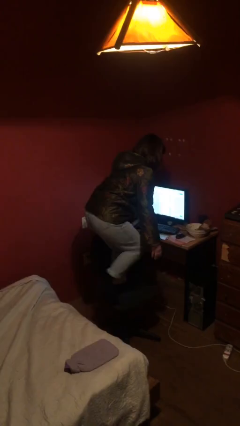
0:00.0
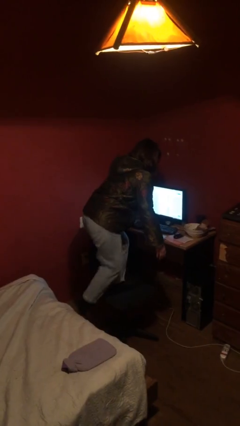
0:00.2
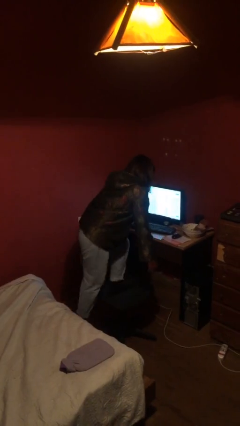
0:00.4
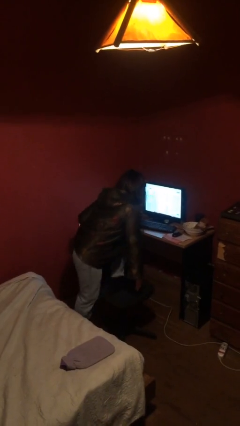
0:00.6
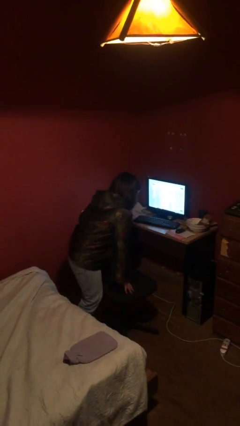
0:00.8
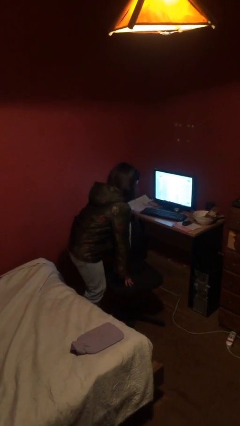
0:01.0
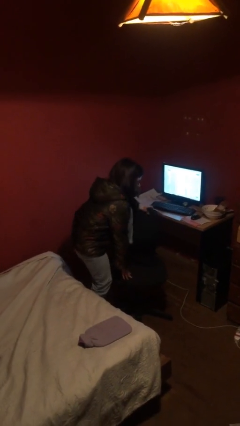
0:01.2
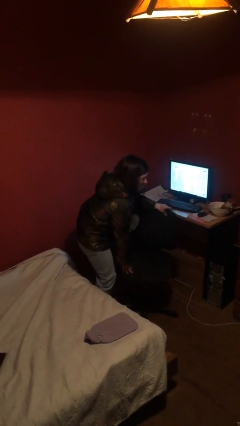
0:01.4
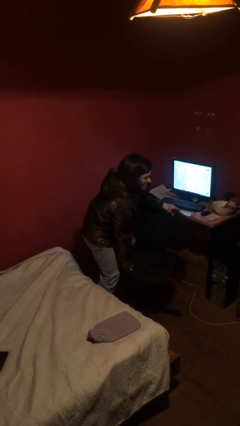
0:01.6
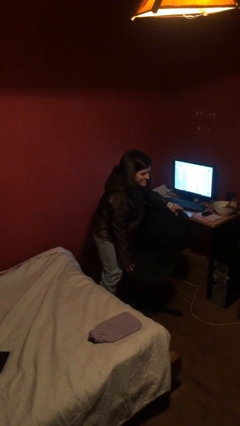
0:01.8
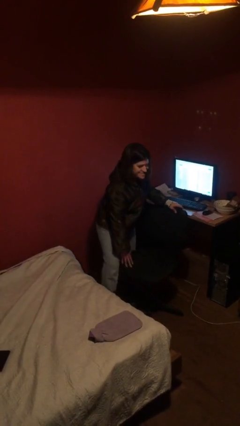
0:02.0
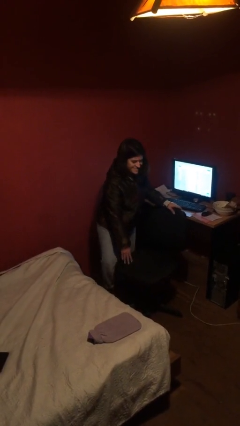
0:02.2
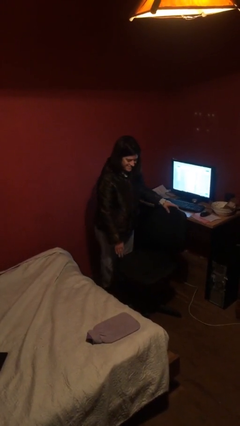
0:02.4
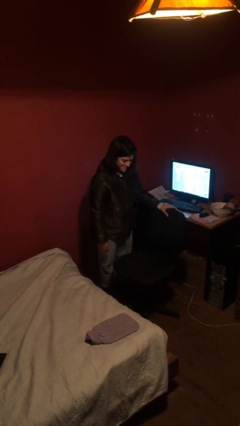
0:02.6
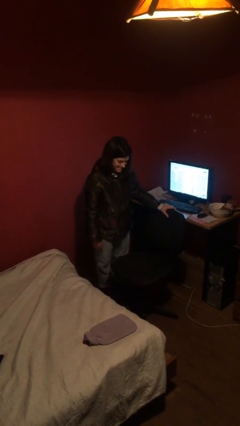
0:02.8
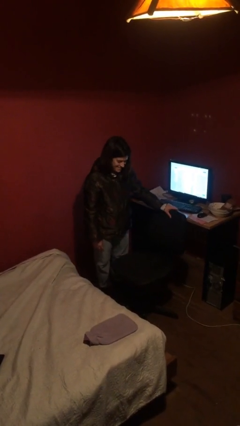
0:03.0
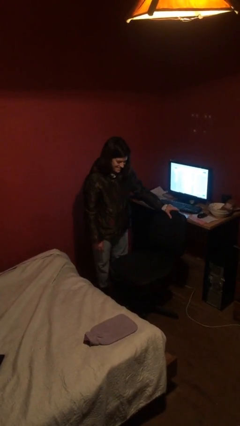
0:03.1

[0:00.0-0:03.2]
person climbs off chair

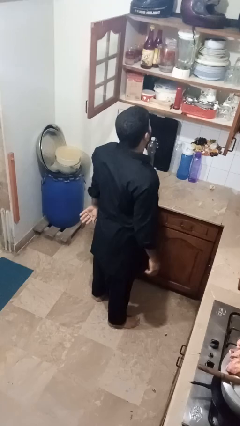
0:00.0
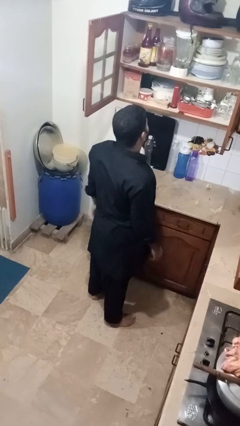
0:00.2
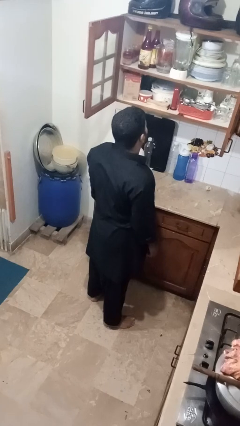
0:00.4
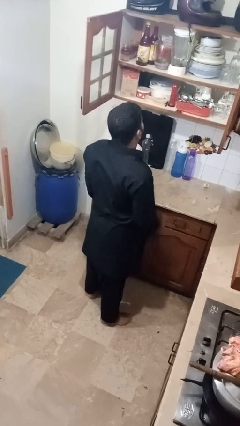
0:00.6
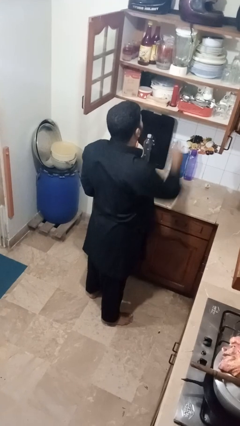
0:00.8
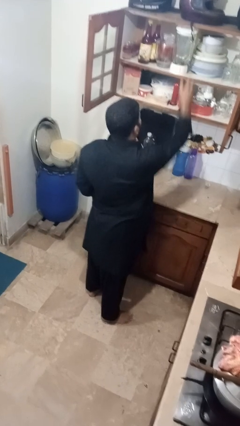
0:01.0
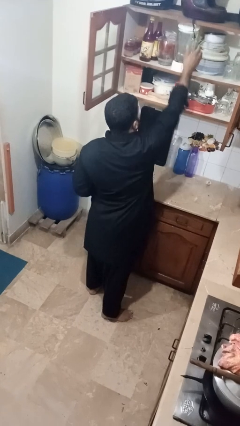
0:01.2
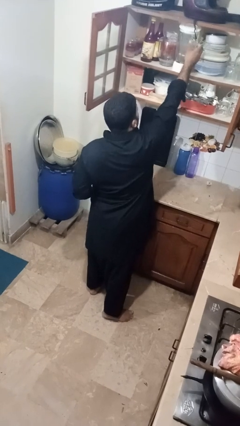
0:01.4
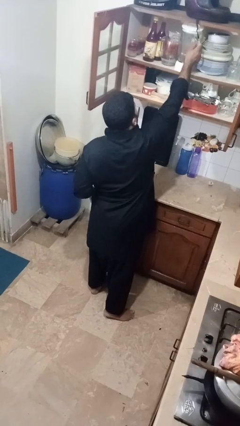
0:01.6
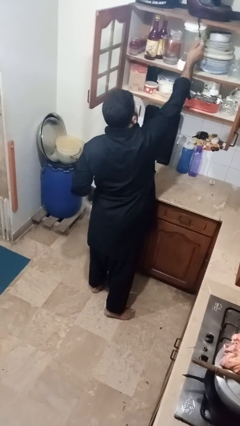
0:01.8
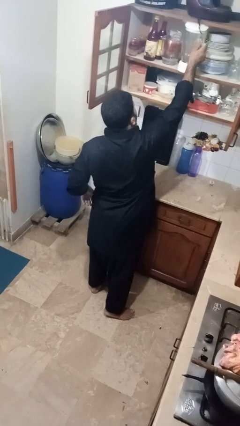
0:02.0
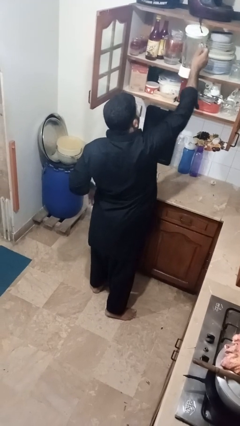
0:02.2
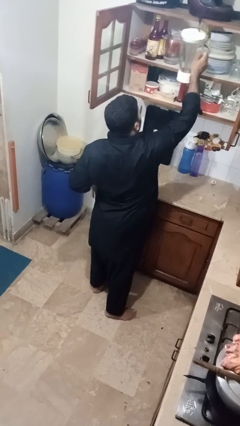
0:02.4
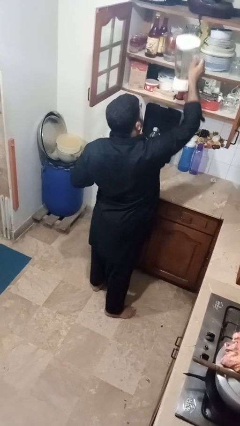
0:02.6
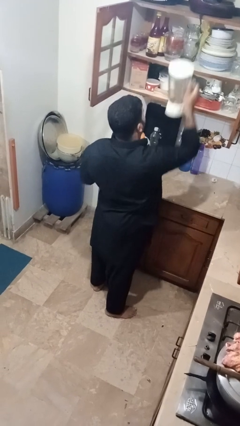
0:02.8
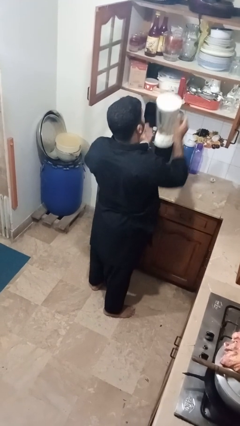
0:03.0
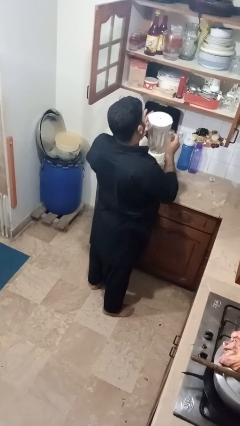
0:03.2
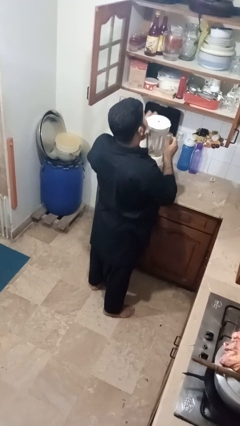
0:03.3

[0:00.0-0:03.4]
person picks up object from cabinet

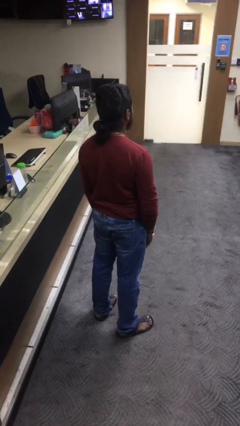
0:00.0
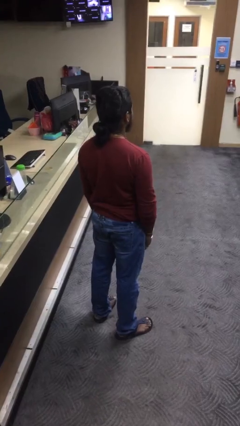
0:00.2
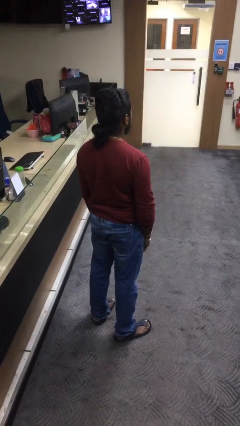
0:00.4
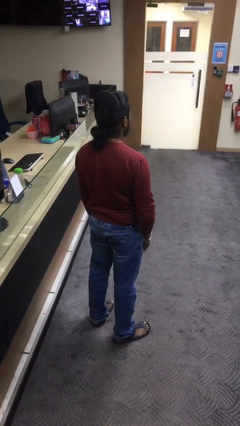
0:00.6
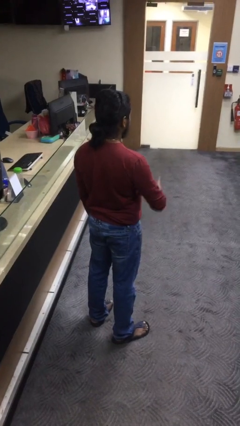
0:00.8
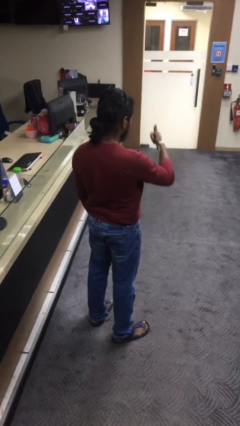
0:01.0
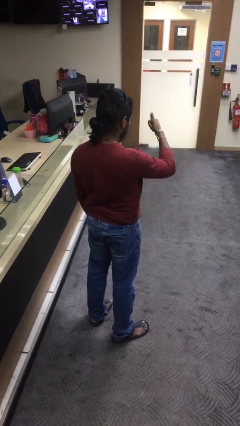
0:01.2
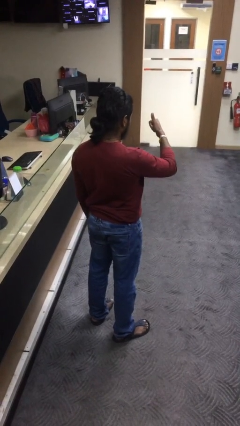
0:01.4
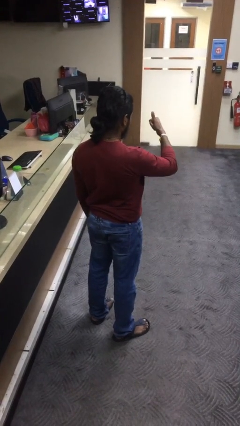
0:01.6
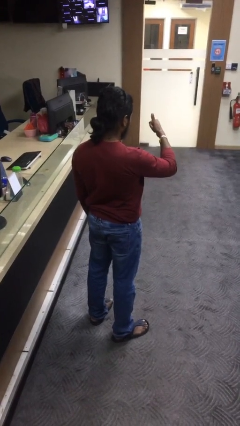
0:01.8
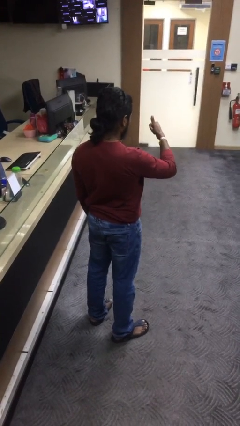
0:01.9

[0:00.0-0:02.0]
person gestures thumbs up

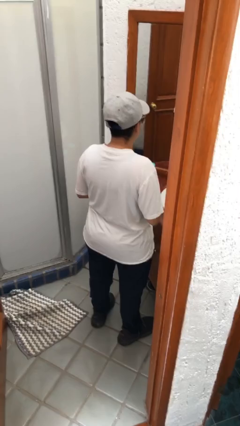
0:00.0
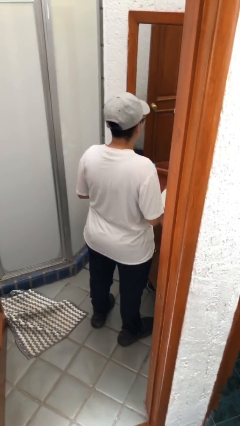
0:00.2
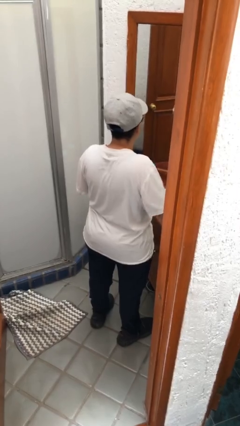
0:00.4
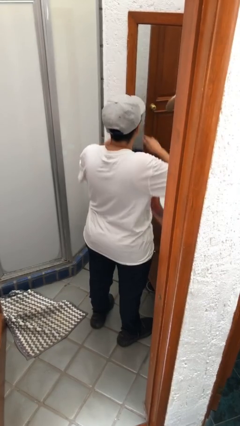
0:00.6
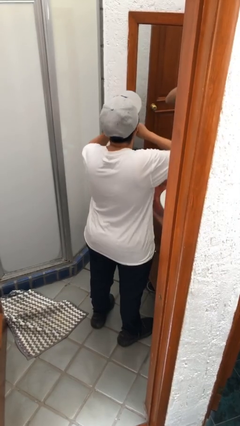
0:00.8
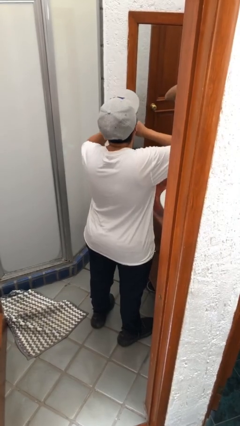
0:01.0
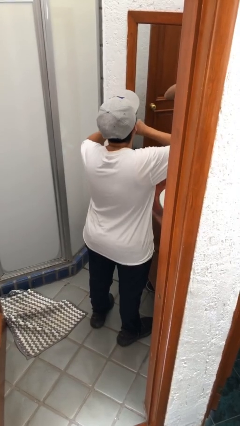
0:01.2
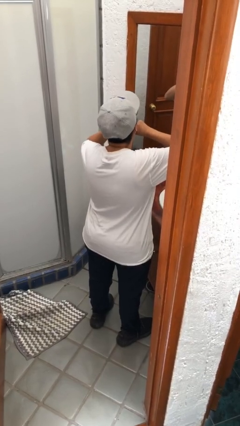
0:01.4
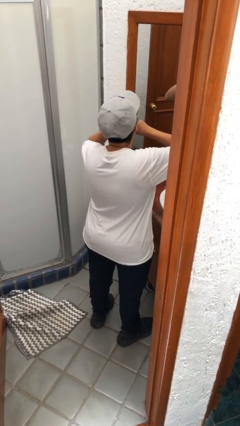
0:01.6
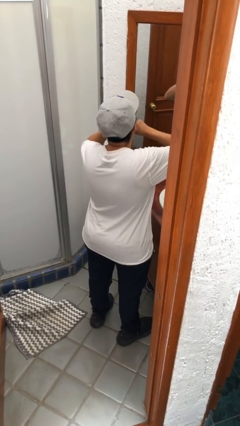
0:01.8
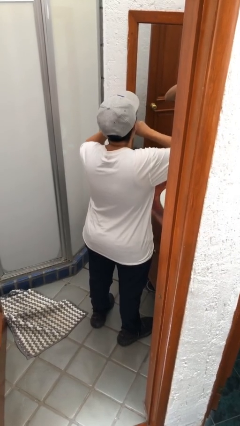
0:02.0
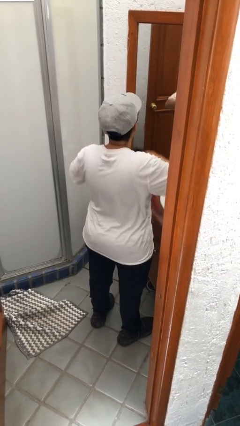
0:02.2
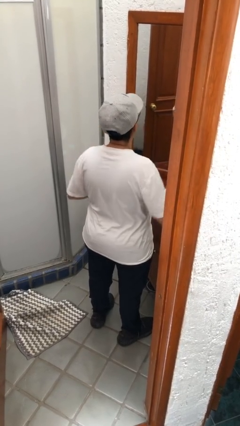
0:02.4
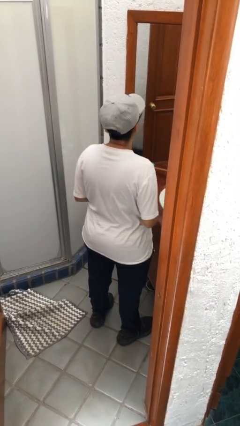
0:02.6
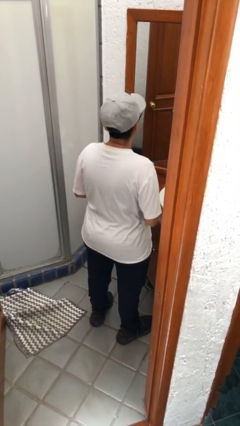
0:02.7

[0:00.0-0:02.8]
person flosses

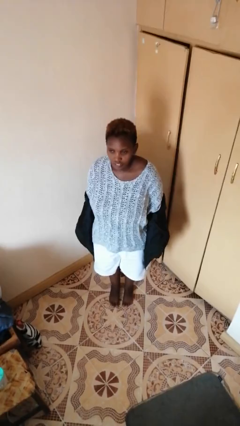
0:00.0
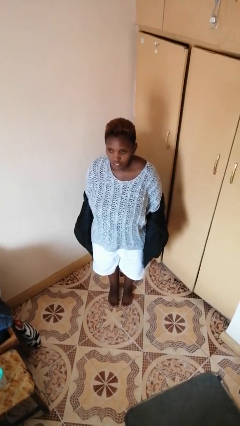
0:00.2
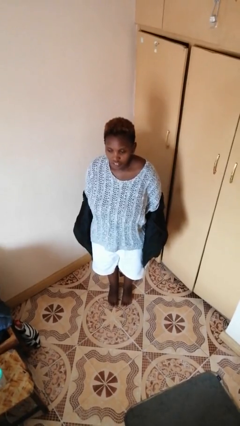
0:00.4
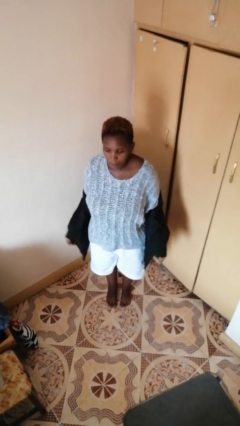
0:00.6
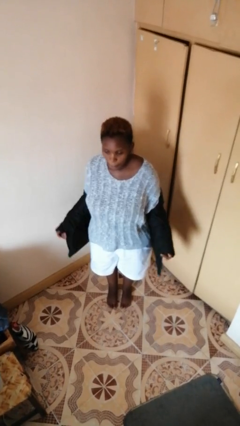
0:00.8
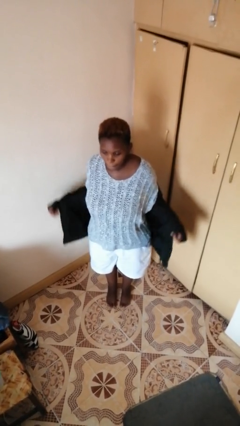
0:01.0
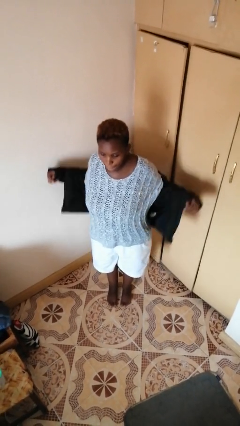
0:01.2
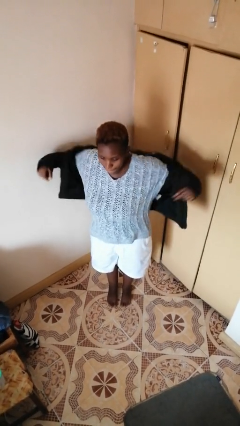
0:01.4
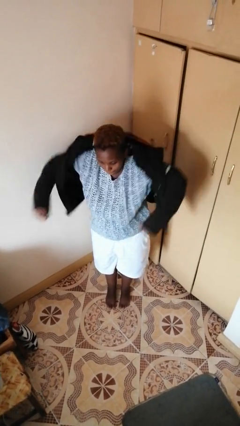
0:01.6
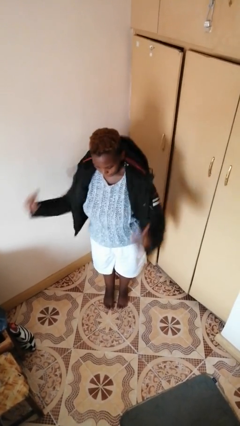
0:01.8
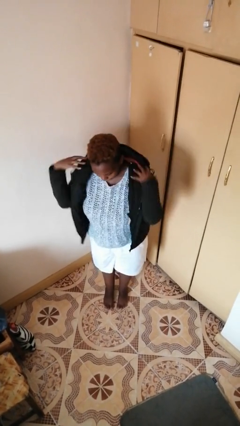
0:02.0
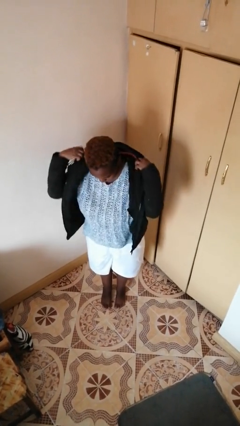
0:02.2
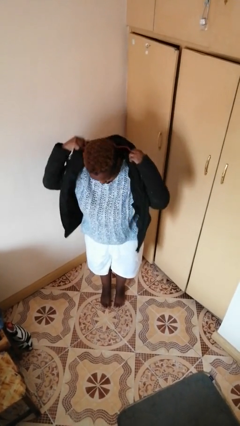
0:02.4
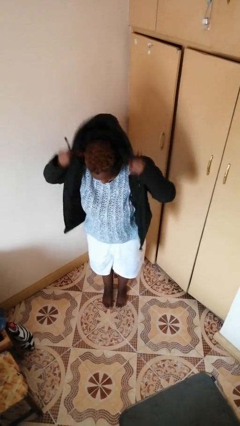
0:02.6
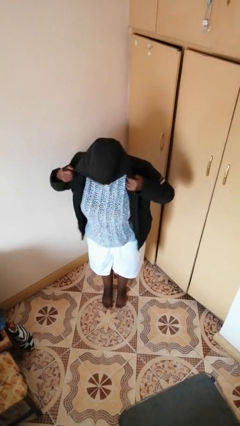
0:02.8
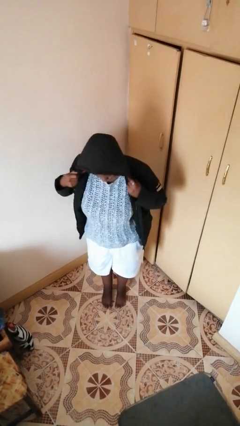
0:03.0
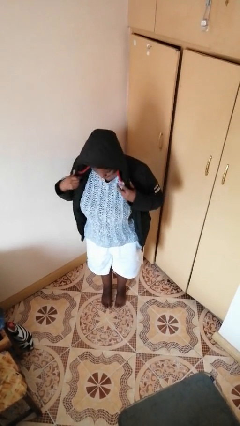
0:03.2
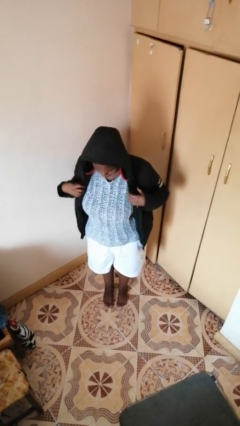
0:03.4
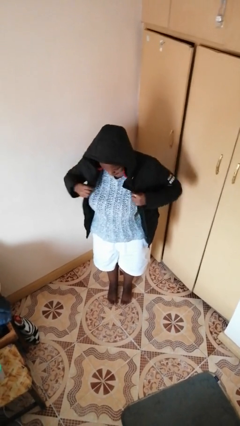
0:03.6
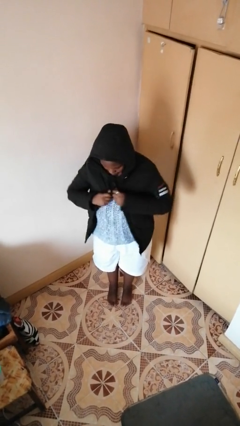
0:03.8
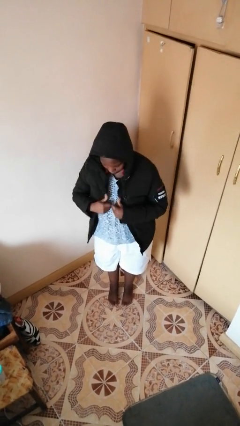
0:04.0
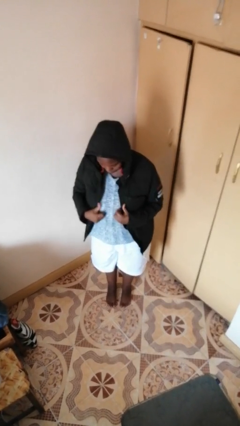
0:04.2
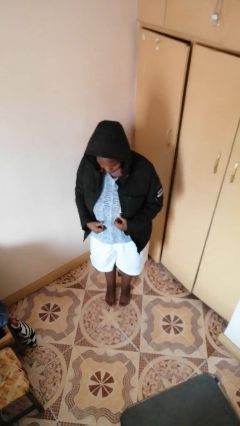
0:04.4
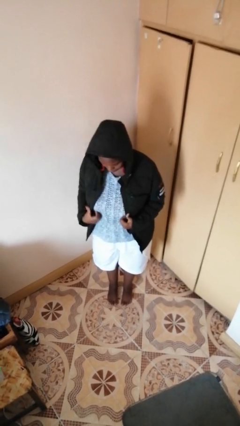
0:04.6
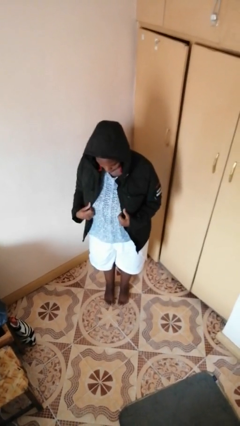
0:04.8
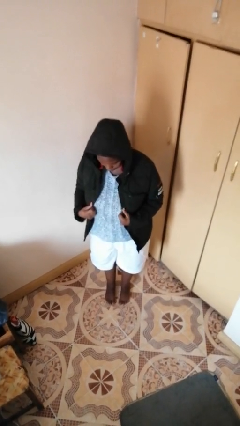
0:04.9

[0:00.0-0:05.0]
person puts on hoodie

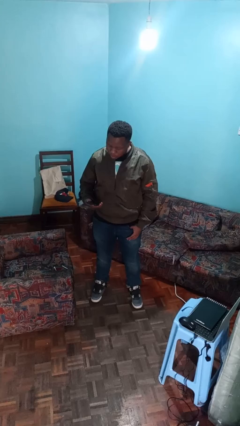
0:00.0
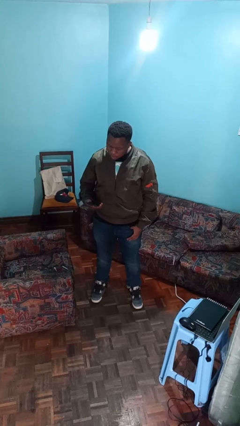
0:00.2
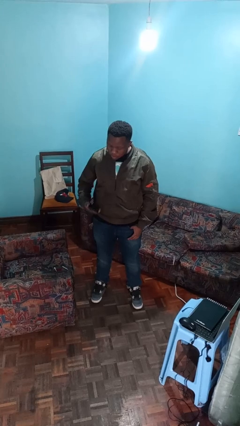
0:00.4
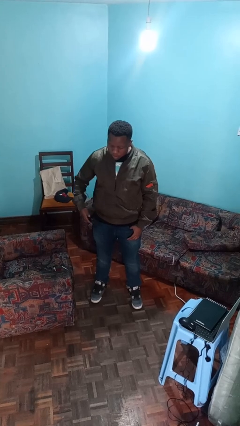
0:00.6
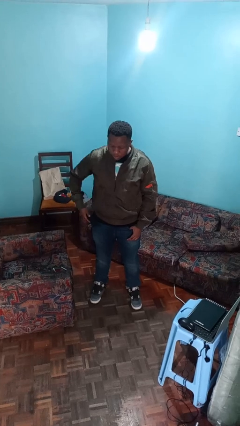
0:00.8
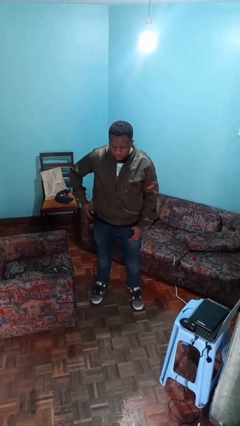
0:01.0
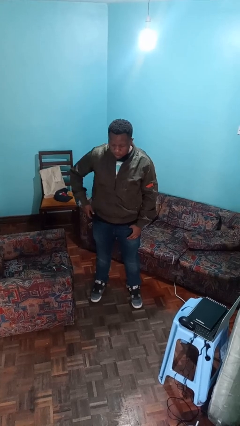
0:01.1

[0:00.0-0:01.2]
person puts phone into pocket

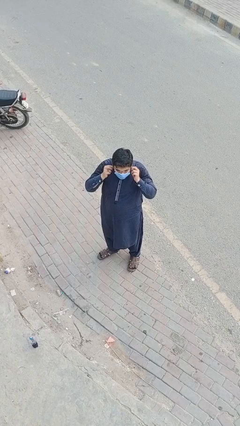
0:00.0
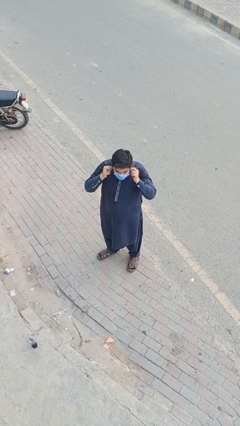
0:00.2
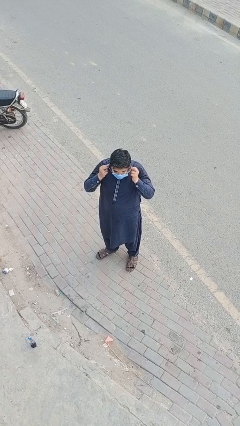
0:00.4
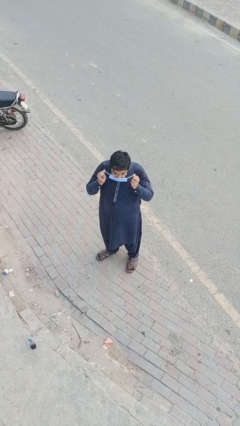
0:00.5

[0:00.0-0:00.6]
person takes off facemask
